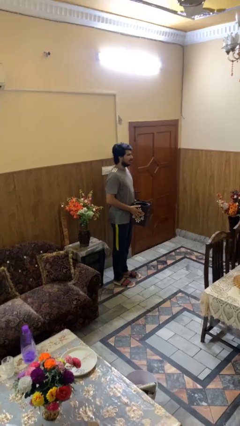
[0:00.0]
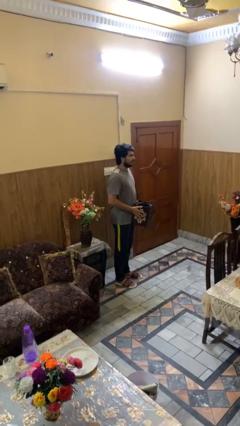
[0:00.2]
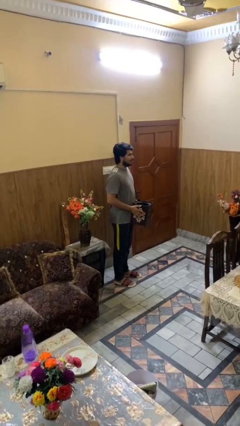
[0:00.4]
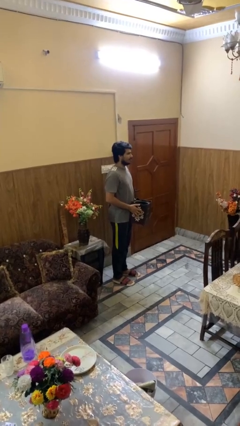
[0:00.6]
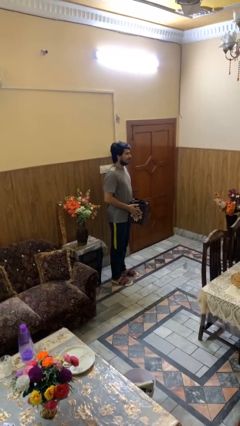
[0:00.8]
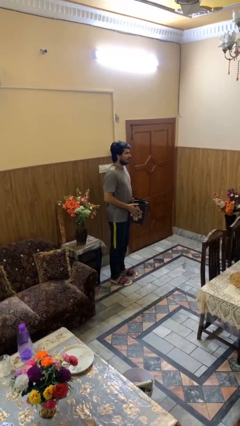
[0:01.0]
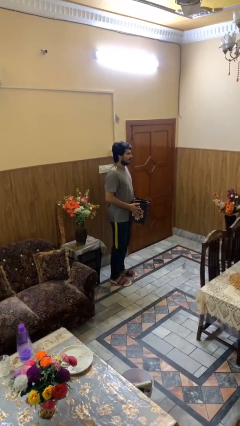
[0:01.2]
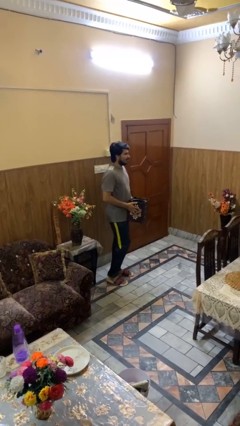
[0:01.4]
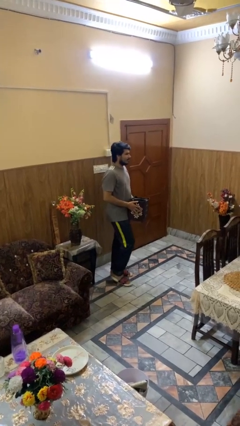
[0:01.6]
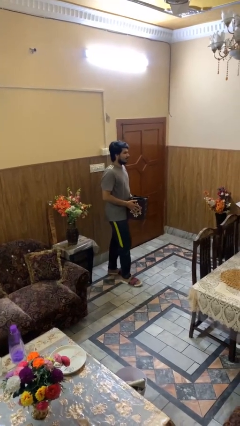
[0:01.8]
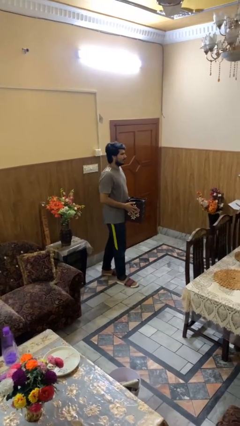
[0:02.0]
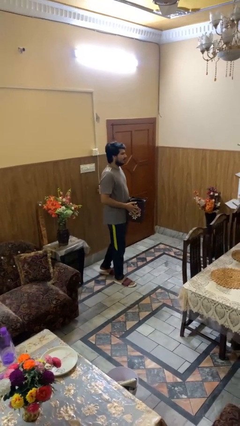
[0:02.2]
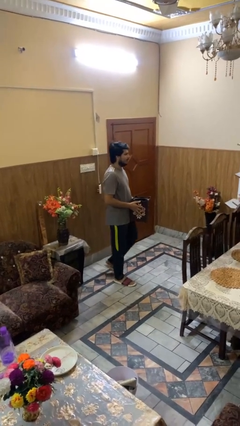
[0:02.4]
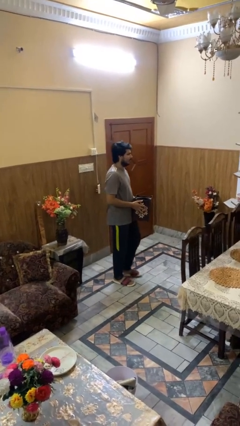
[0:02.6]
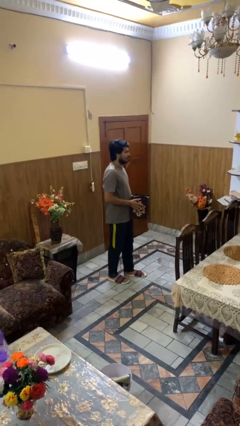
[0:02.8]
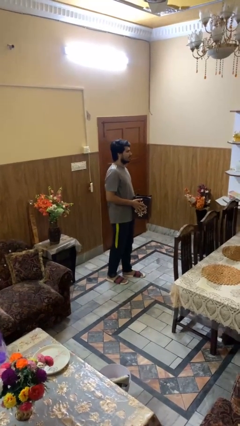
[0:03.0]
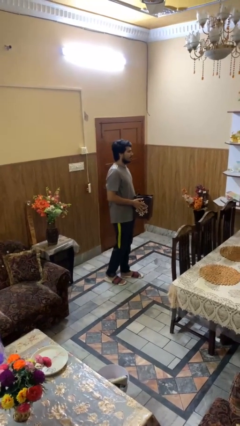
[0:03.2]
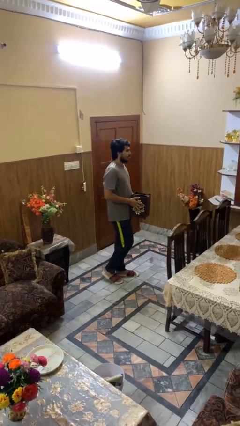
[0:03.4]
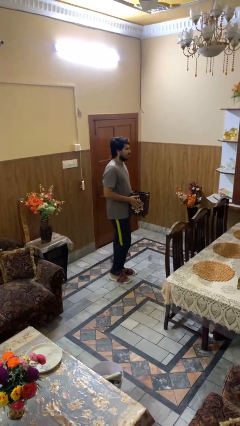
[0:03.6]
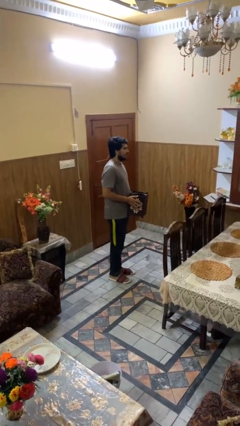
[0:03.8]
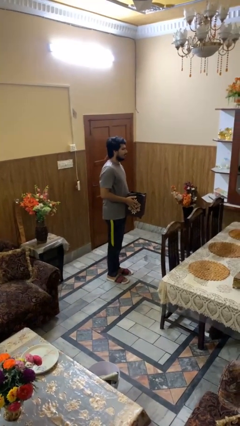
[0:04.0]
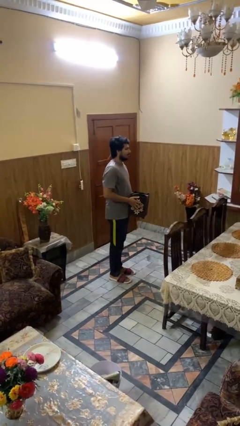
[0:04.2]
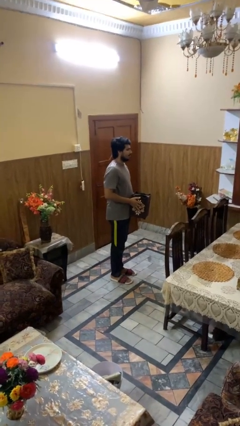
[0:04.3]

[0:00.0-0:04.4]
person carries groceries

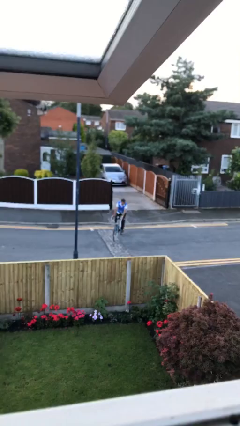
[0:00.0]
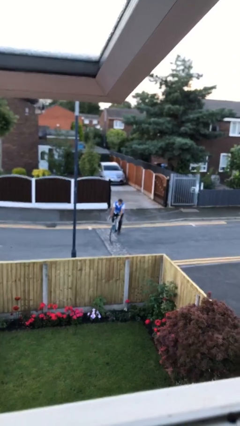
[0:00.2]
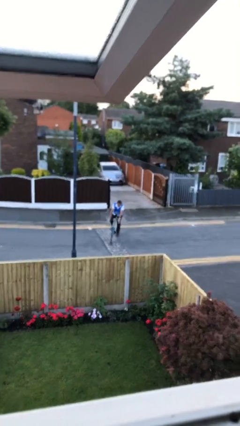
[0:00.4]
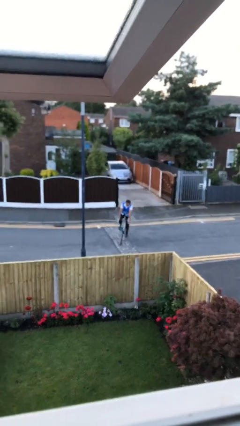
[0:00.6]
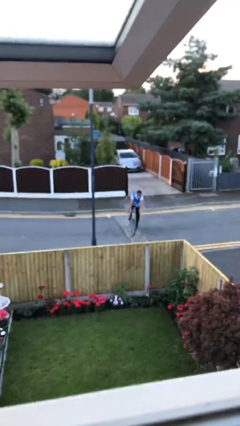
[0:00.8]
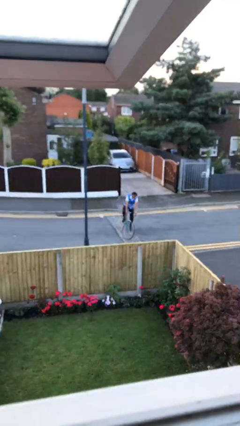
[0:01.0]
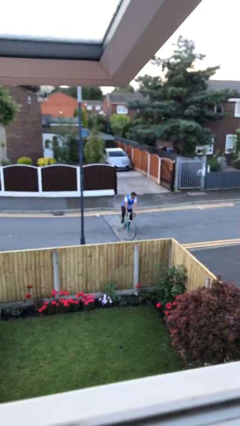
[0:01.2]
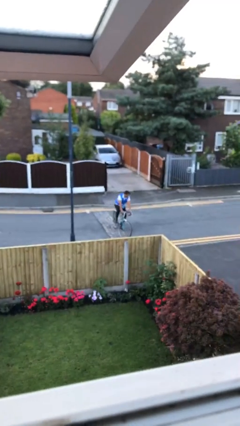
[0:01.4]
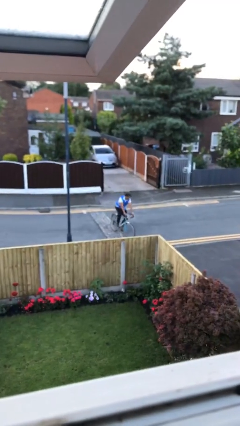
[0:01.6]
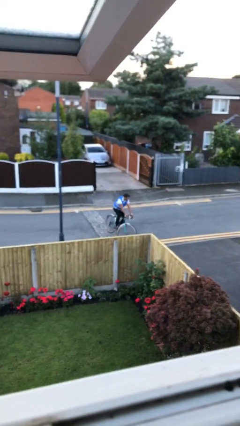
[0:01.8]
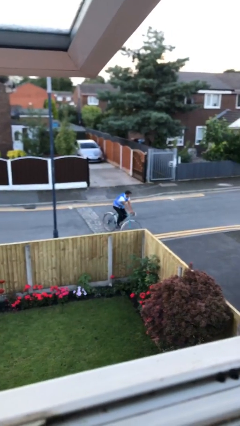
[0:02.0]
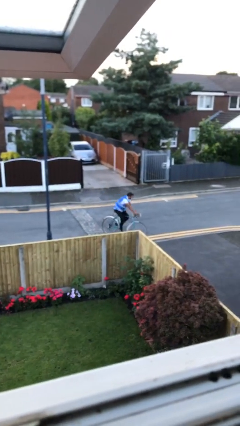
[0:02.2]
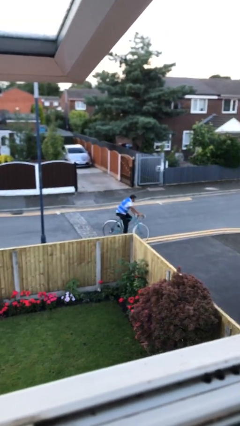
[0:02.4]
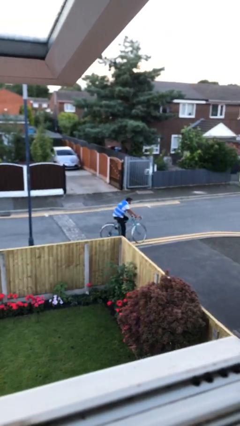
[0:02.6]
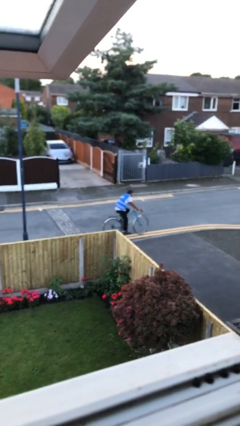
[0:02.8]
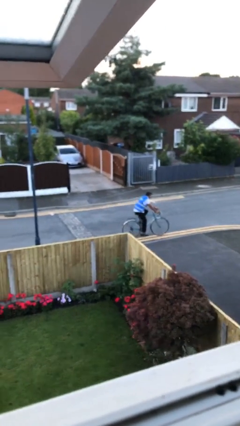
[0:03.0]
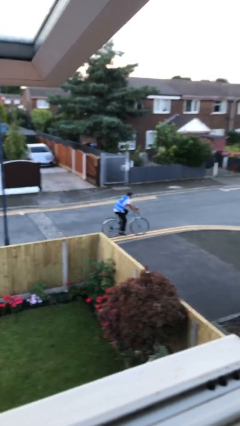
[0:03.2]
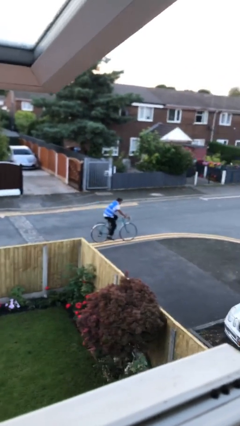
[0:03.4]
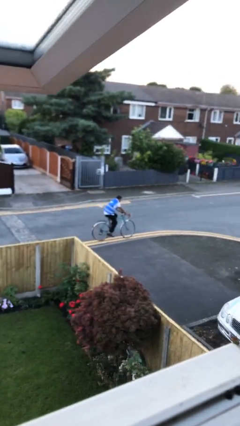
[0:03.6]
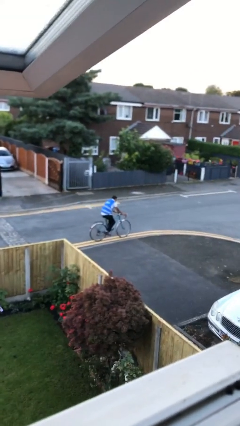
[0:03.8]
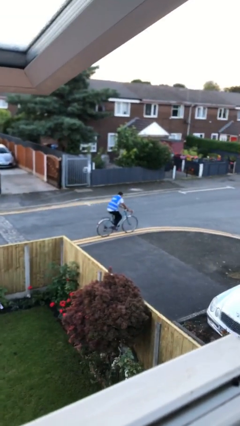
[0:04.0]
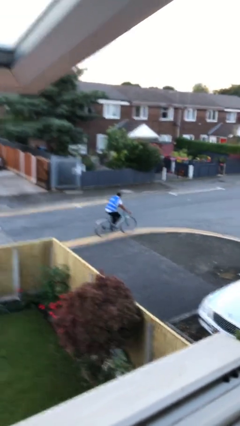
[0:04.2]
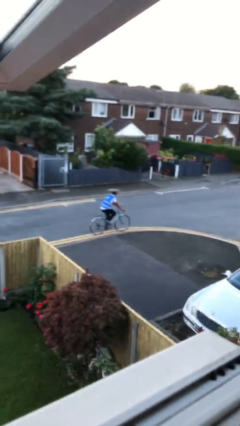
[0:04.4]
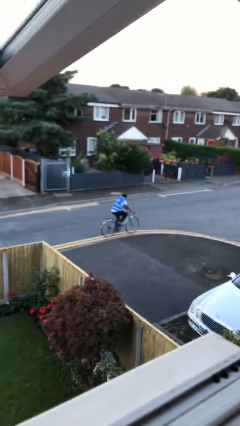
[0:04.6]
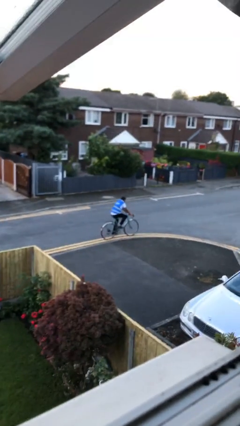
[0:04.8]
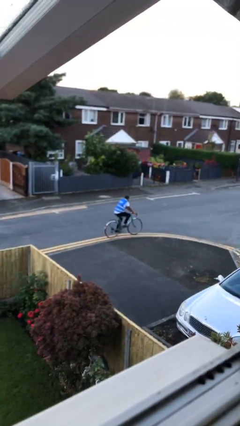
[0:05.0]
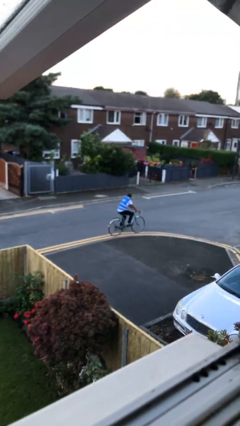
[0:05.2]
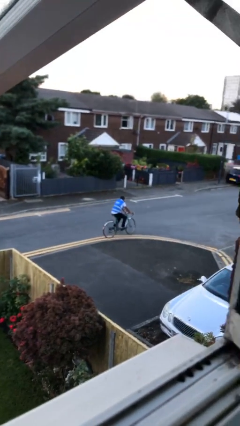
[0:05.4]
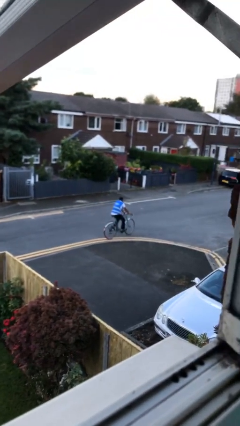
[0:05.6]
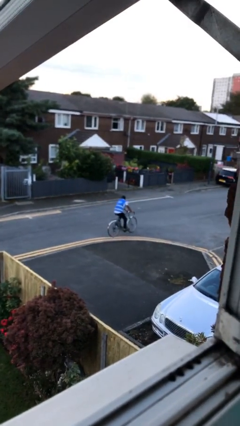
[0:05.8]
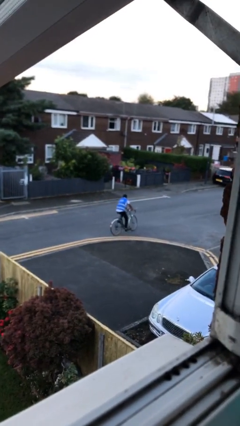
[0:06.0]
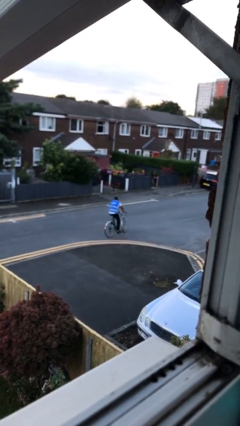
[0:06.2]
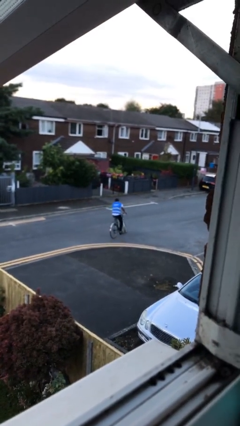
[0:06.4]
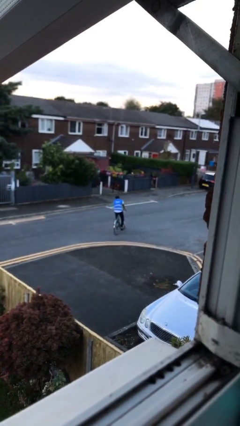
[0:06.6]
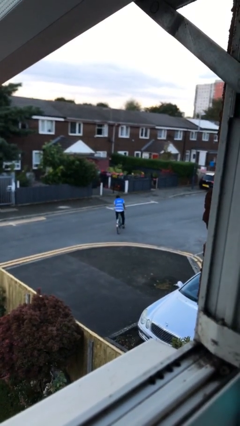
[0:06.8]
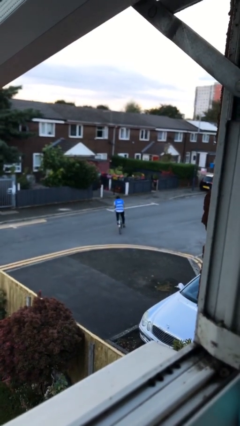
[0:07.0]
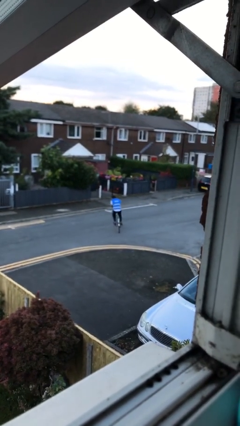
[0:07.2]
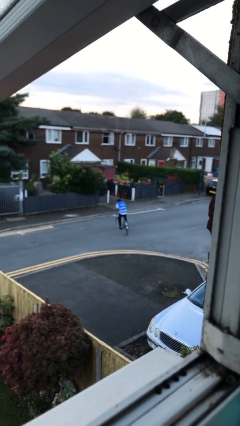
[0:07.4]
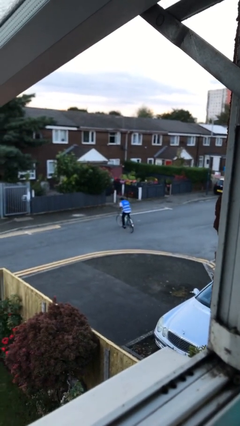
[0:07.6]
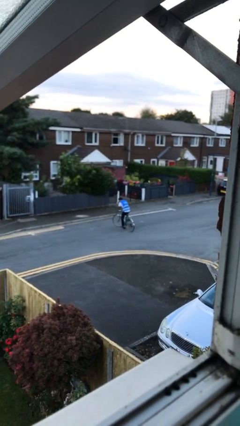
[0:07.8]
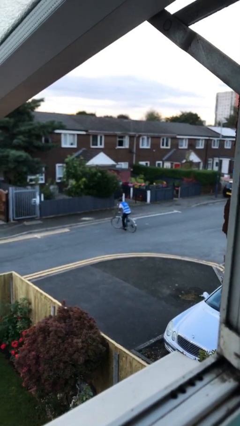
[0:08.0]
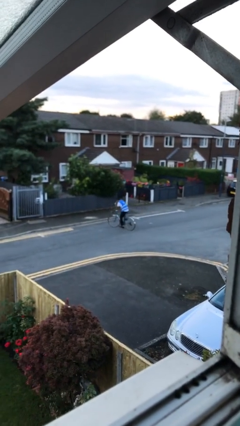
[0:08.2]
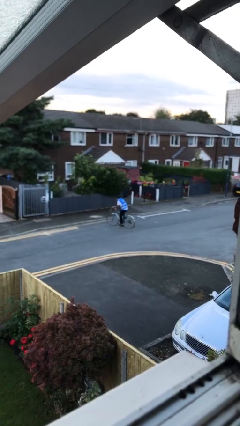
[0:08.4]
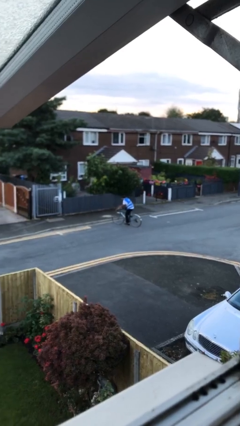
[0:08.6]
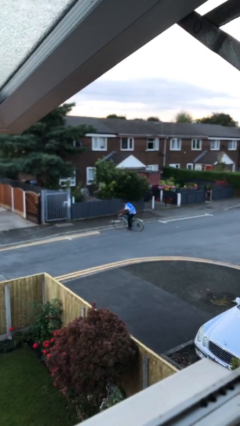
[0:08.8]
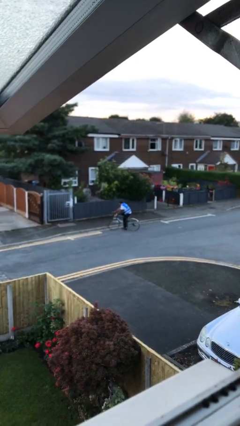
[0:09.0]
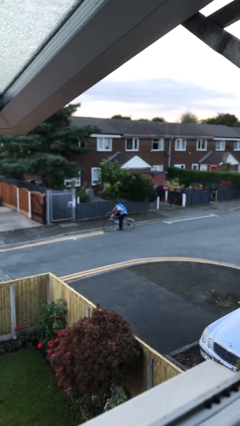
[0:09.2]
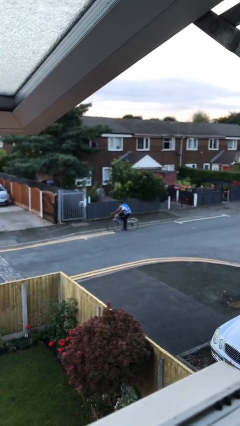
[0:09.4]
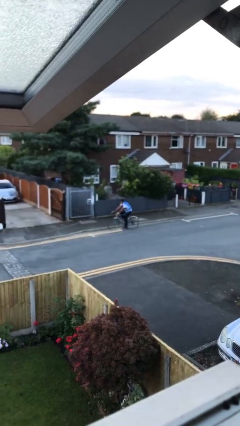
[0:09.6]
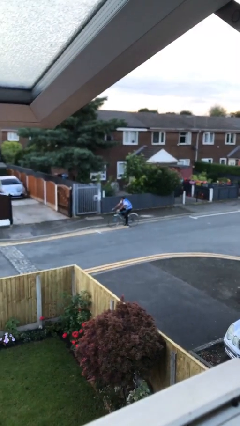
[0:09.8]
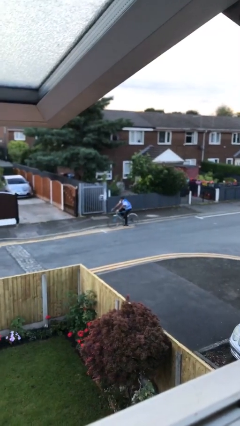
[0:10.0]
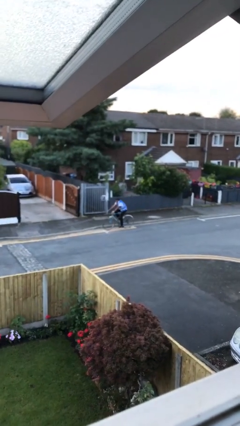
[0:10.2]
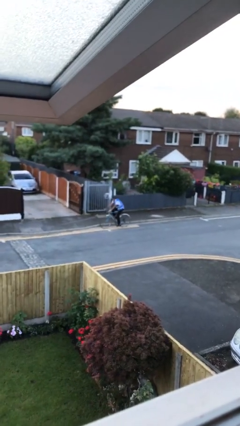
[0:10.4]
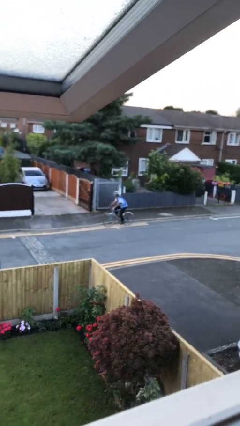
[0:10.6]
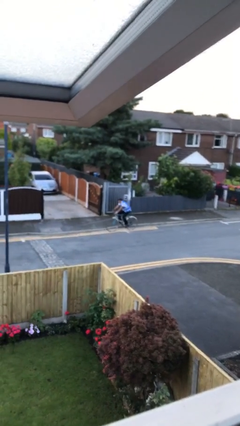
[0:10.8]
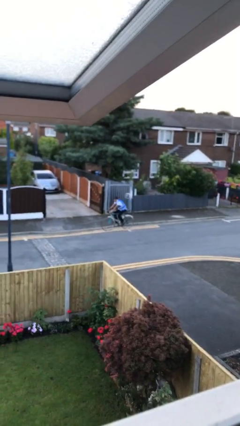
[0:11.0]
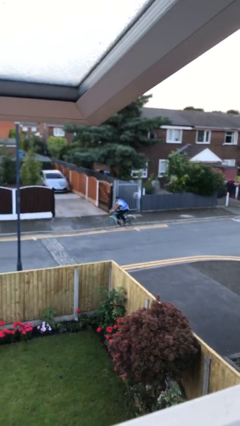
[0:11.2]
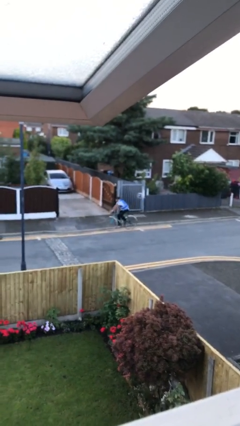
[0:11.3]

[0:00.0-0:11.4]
person rides bicycle

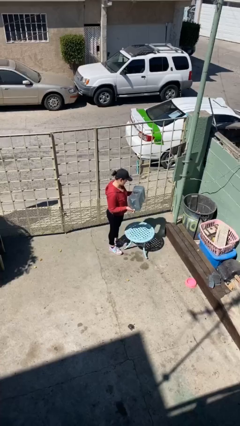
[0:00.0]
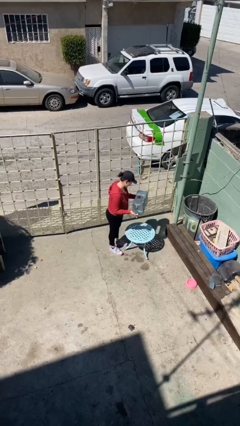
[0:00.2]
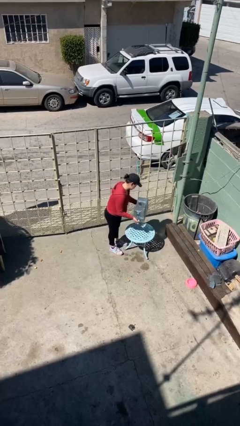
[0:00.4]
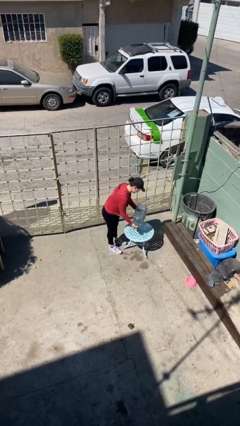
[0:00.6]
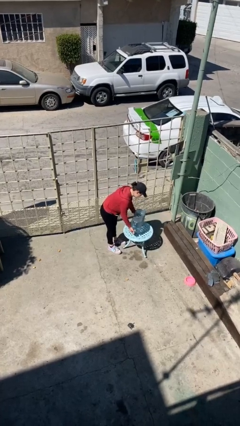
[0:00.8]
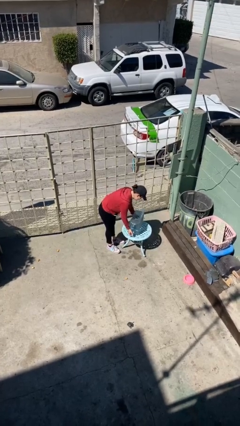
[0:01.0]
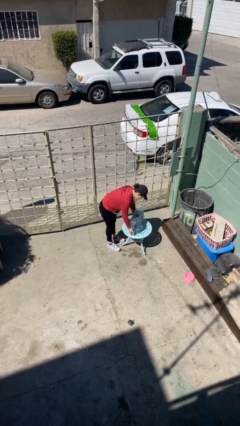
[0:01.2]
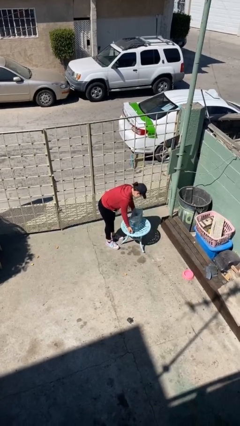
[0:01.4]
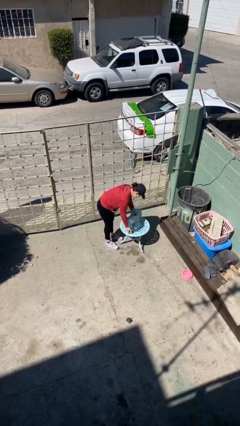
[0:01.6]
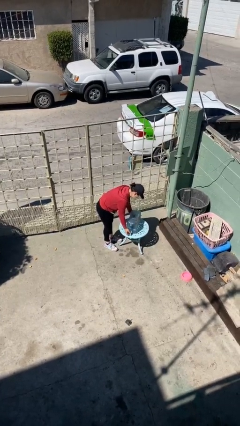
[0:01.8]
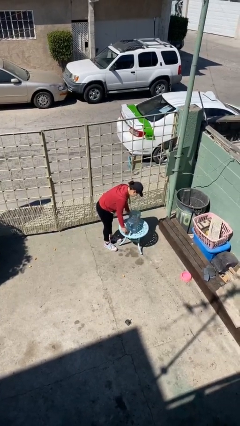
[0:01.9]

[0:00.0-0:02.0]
person puts down object on table
